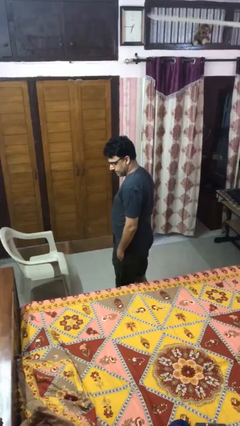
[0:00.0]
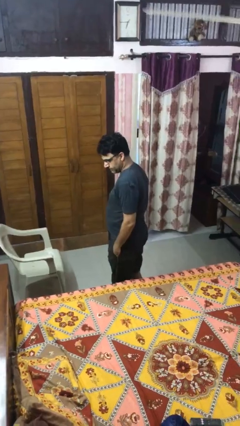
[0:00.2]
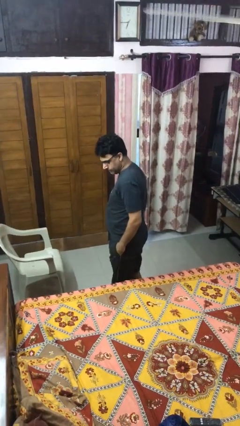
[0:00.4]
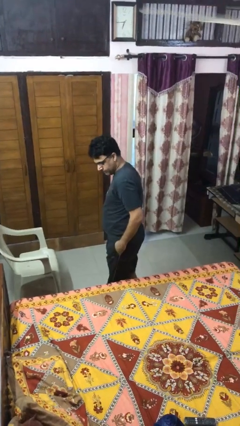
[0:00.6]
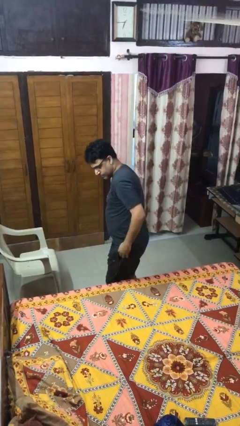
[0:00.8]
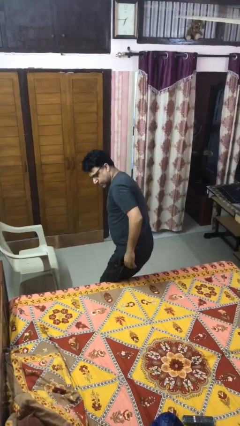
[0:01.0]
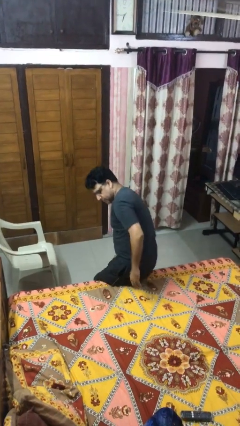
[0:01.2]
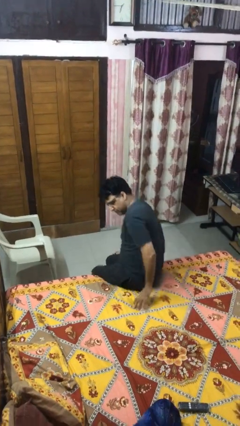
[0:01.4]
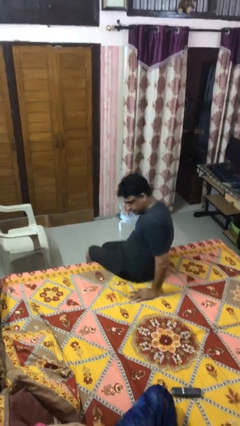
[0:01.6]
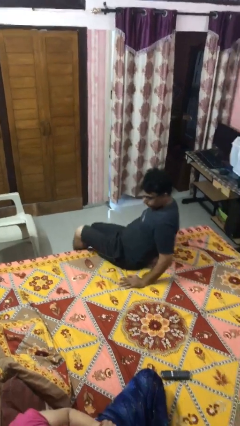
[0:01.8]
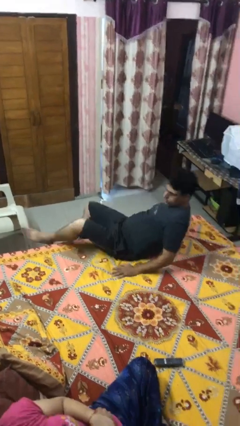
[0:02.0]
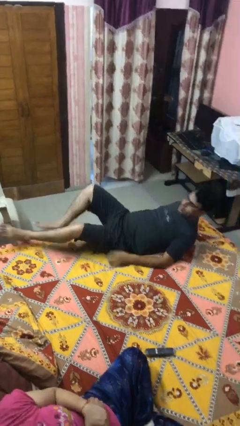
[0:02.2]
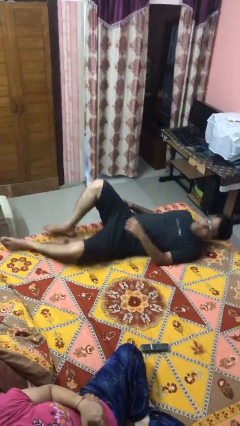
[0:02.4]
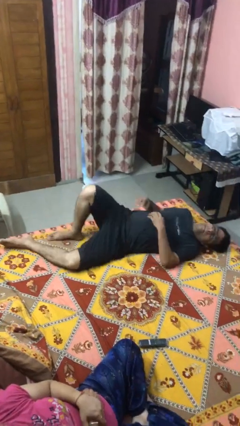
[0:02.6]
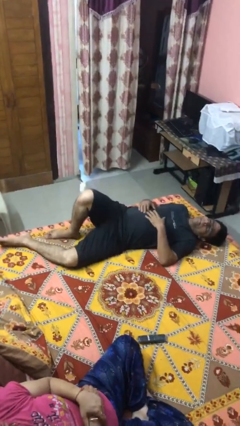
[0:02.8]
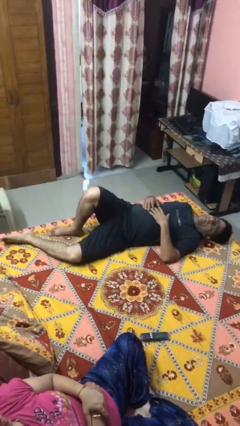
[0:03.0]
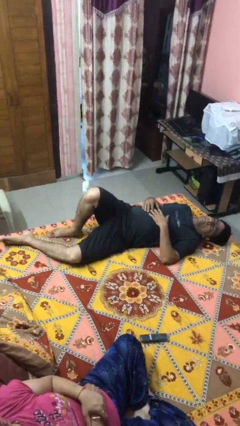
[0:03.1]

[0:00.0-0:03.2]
person lies down on bed

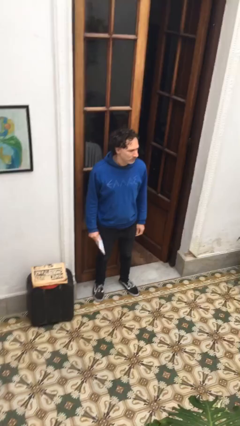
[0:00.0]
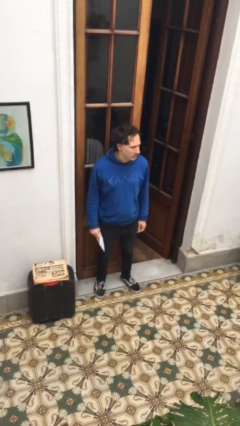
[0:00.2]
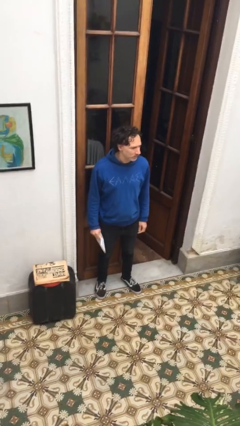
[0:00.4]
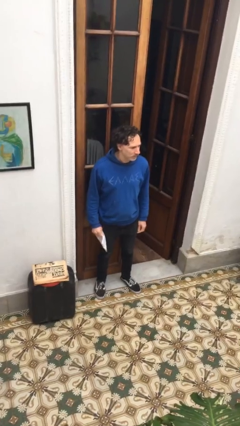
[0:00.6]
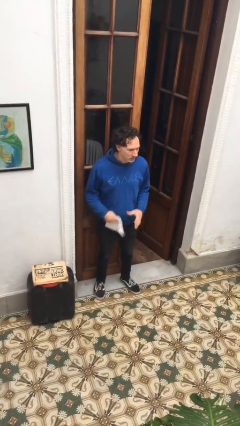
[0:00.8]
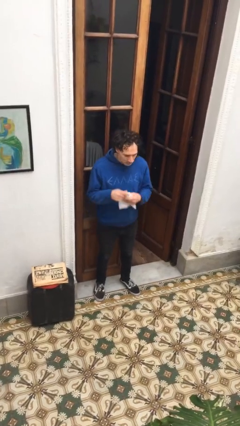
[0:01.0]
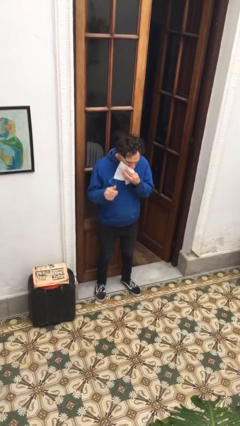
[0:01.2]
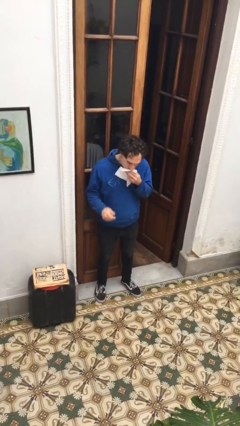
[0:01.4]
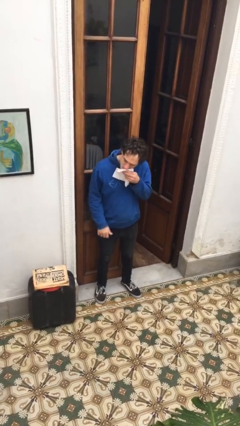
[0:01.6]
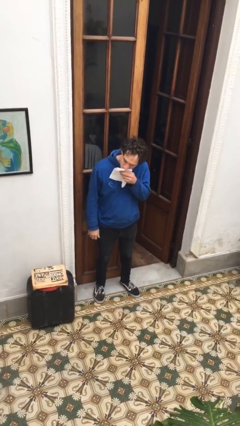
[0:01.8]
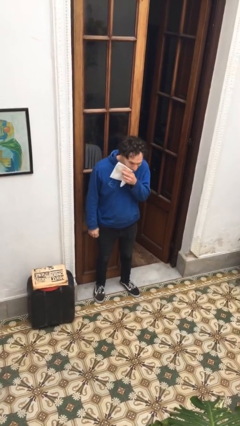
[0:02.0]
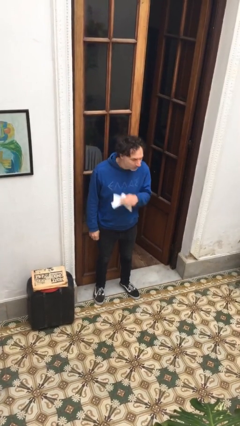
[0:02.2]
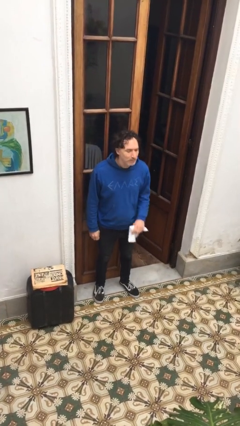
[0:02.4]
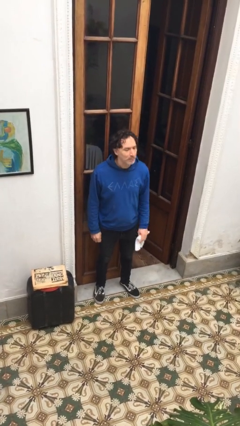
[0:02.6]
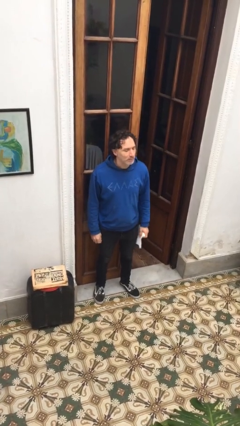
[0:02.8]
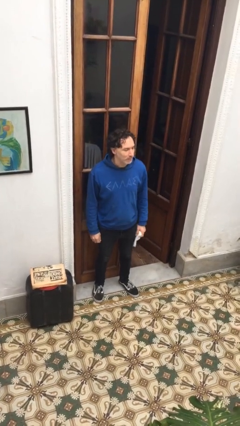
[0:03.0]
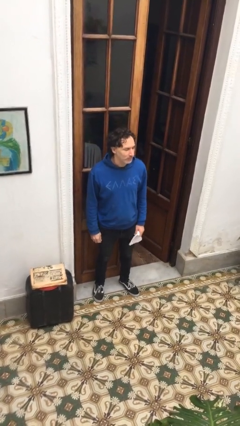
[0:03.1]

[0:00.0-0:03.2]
person wipes mouth with napkin

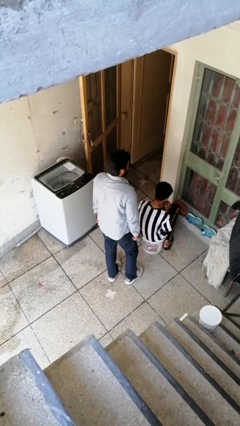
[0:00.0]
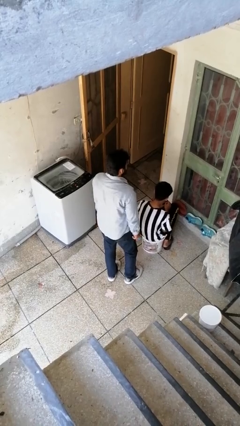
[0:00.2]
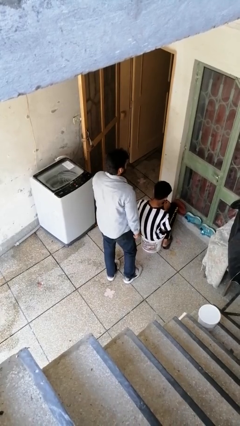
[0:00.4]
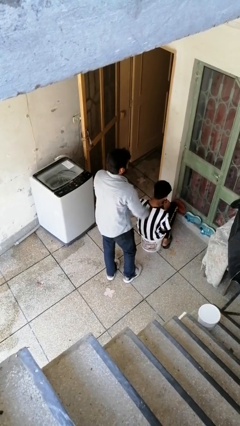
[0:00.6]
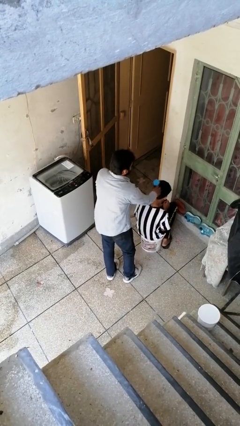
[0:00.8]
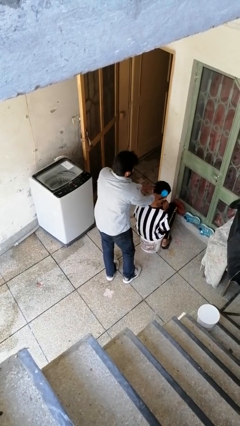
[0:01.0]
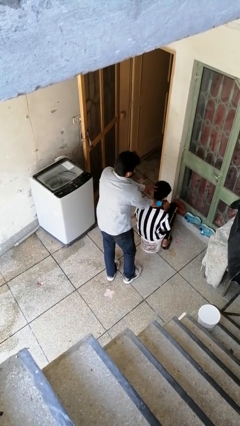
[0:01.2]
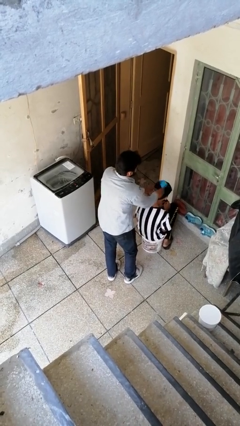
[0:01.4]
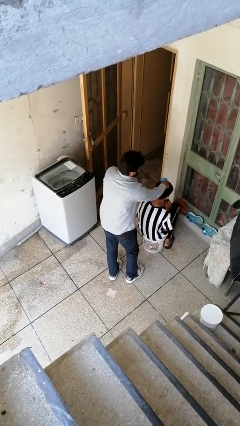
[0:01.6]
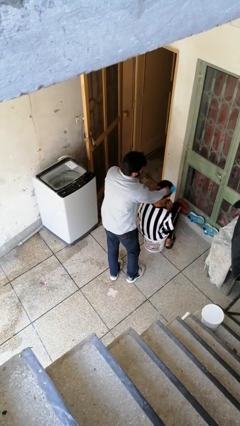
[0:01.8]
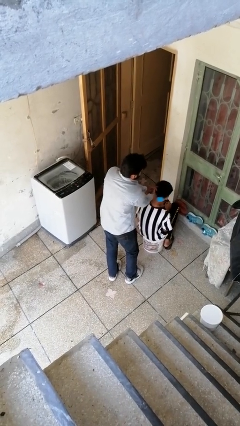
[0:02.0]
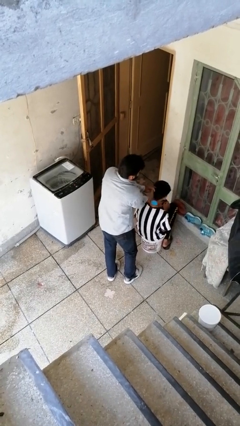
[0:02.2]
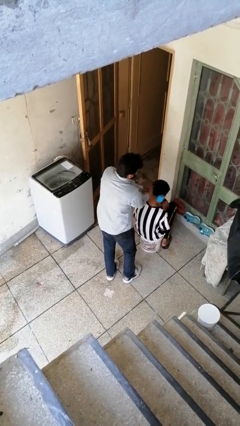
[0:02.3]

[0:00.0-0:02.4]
person brushes hair of person

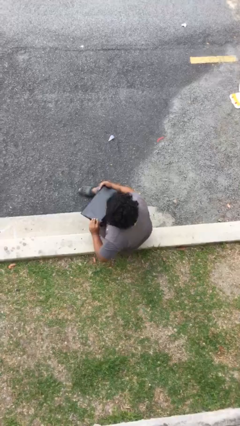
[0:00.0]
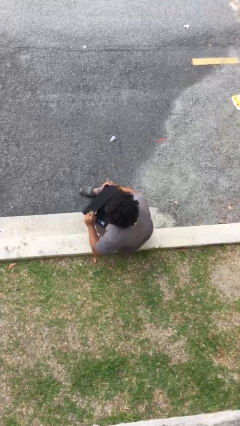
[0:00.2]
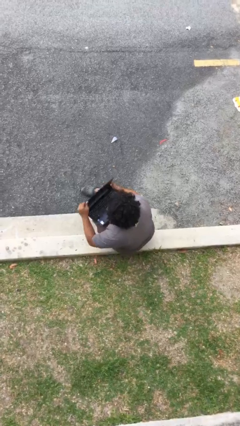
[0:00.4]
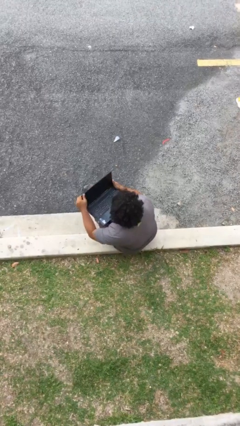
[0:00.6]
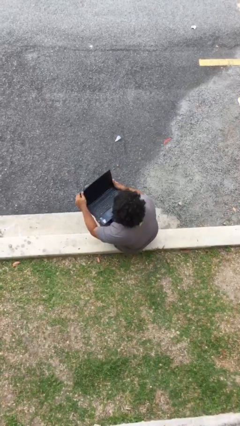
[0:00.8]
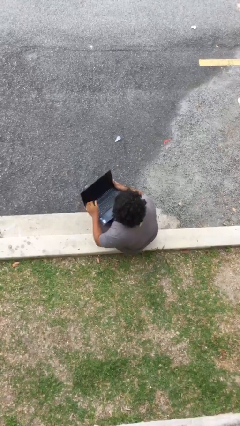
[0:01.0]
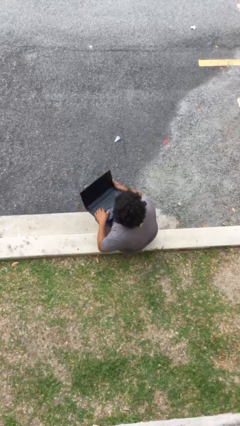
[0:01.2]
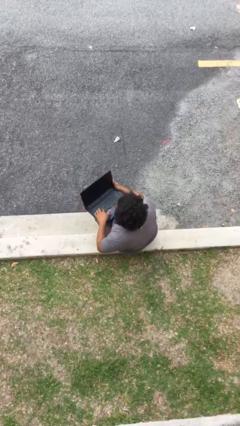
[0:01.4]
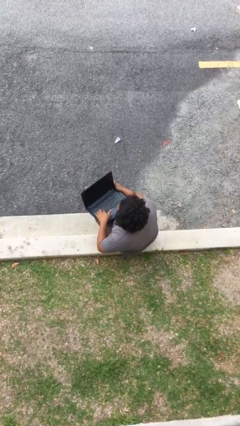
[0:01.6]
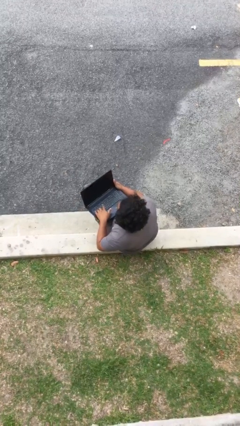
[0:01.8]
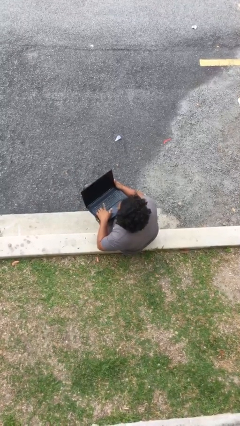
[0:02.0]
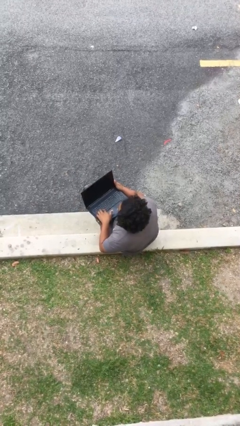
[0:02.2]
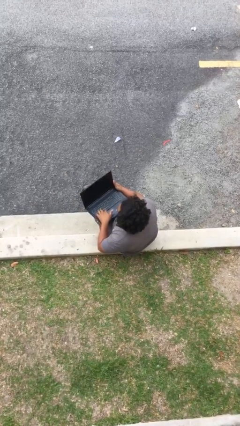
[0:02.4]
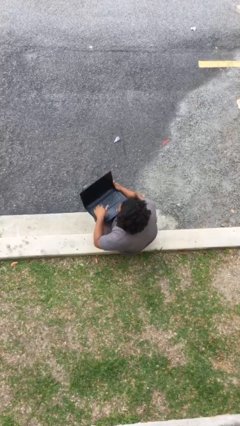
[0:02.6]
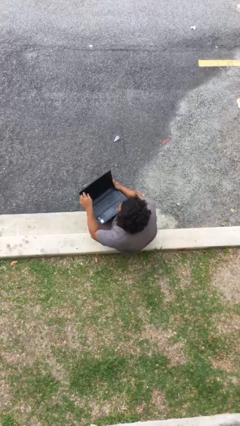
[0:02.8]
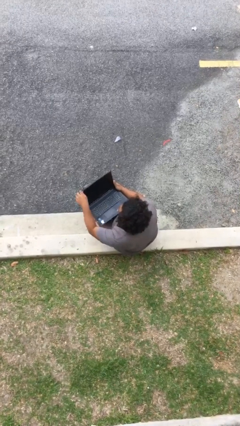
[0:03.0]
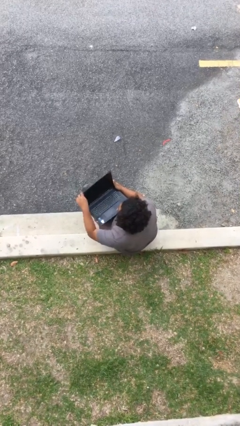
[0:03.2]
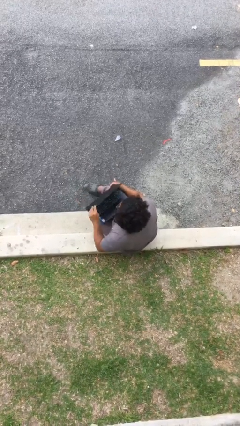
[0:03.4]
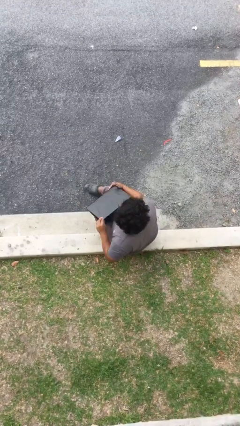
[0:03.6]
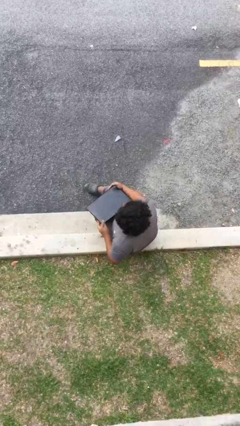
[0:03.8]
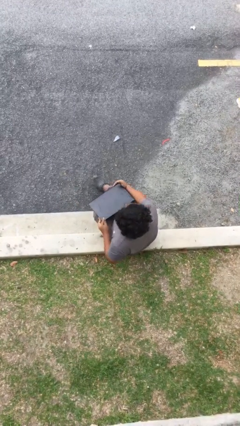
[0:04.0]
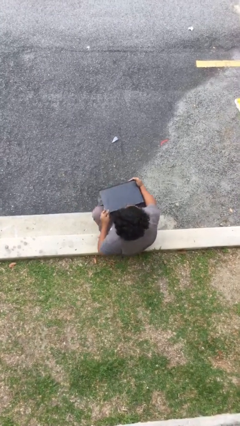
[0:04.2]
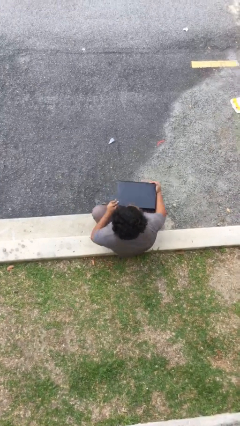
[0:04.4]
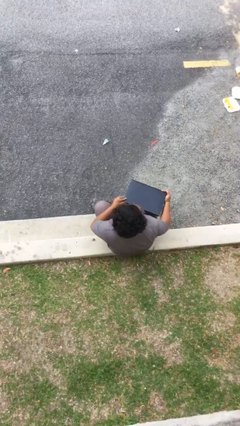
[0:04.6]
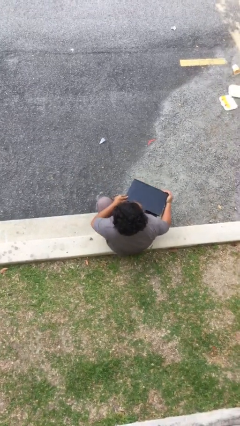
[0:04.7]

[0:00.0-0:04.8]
person interacts with laptop

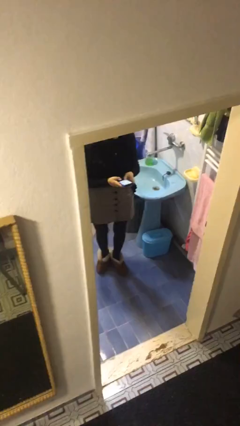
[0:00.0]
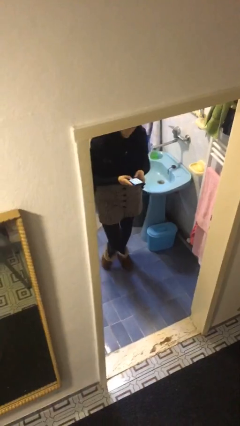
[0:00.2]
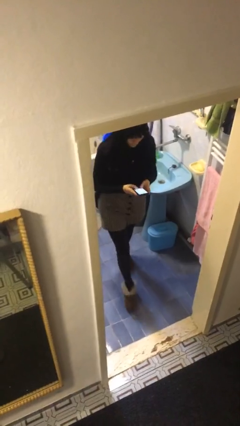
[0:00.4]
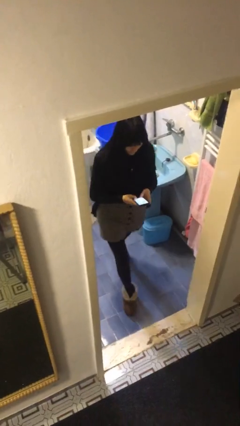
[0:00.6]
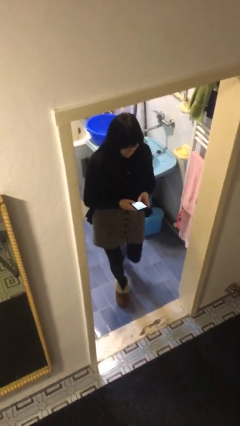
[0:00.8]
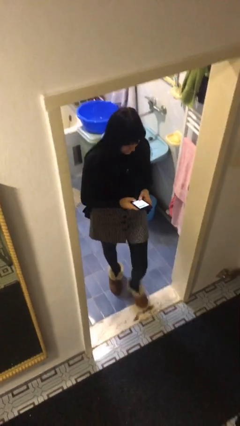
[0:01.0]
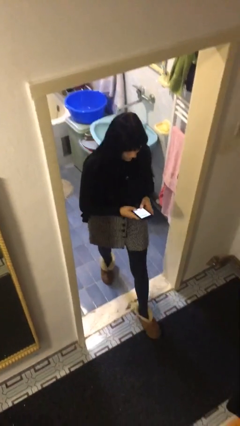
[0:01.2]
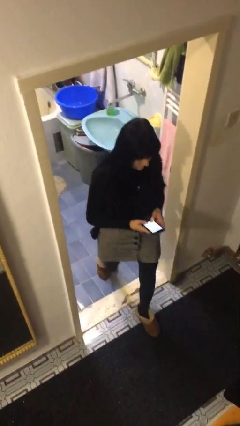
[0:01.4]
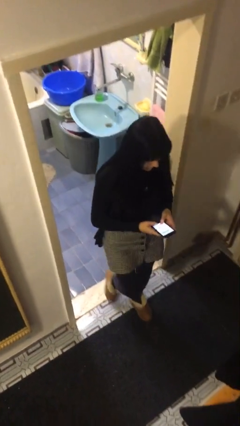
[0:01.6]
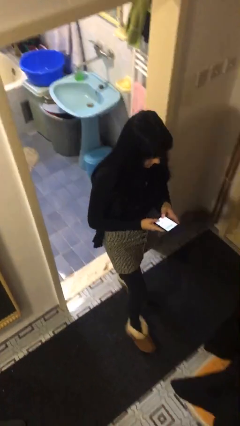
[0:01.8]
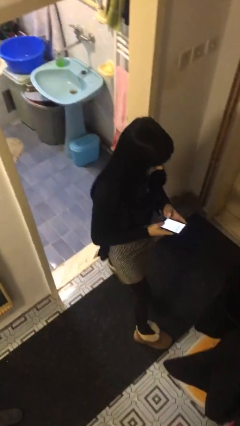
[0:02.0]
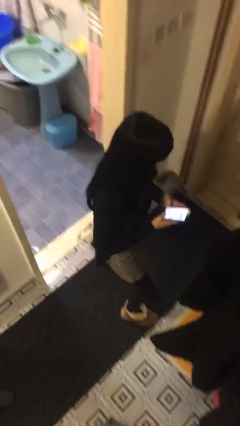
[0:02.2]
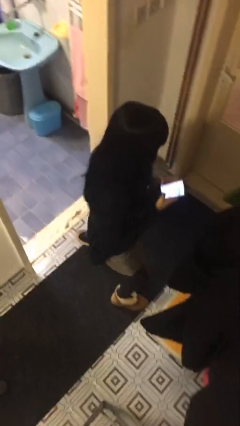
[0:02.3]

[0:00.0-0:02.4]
person enters scene through structure

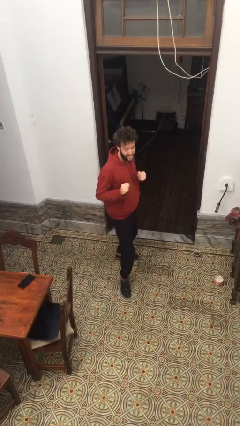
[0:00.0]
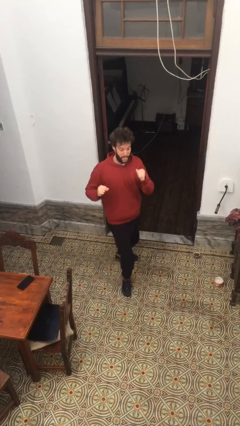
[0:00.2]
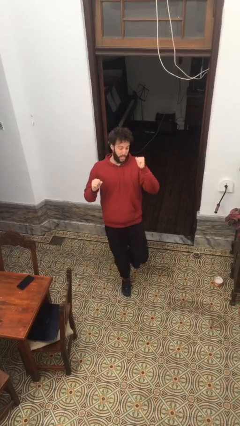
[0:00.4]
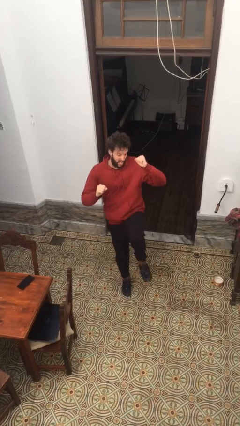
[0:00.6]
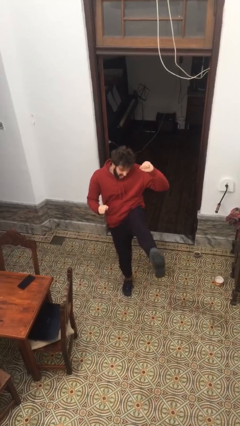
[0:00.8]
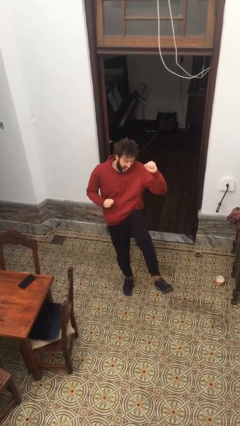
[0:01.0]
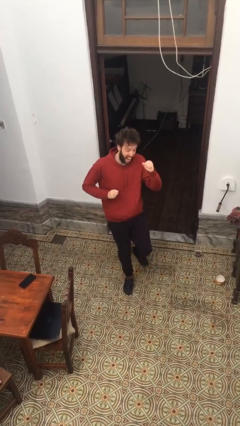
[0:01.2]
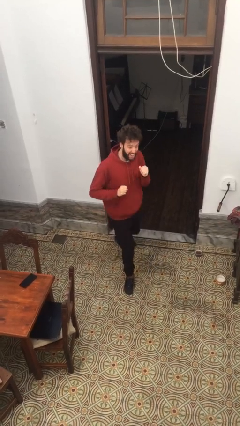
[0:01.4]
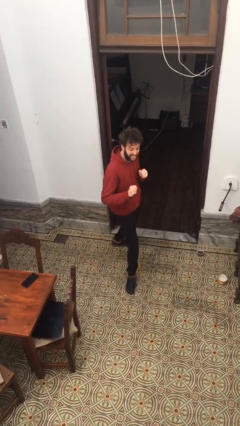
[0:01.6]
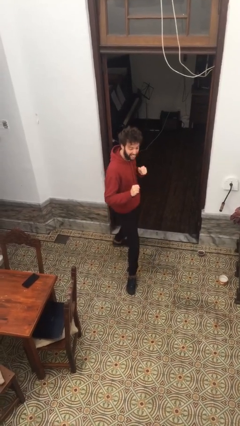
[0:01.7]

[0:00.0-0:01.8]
person karate kicks
